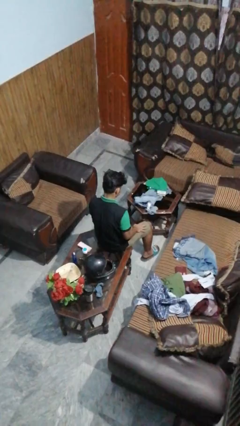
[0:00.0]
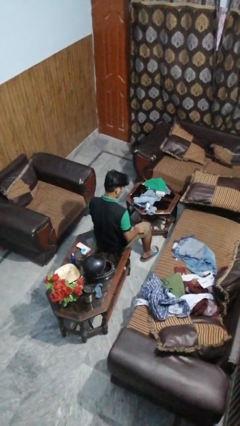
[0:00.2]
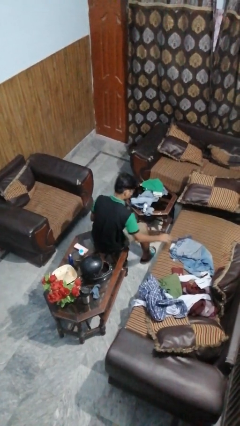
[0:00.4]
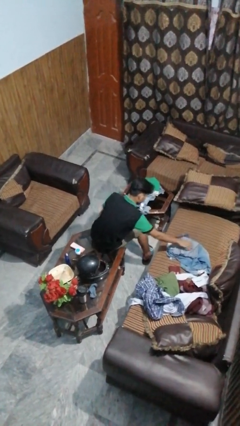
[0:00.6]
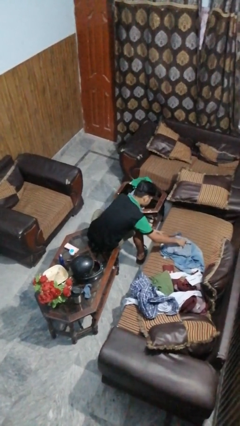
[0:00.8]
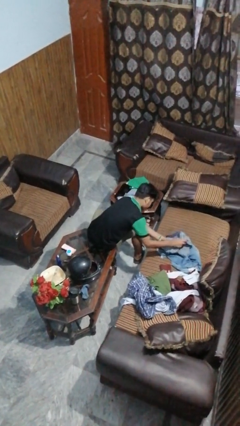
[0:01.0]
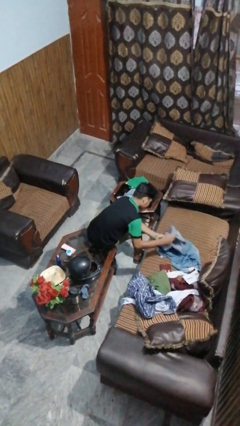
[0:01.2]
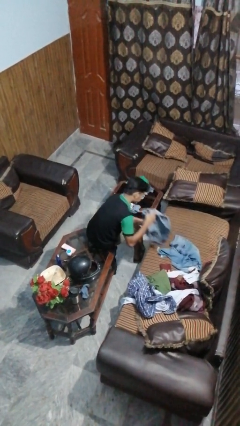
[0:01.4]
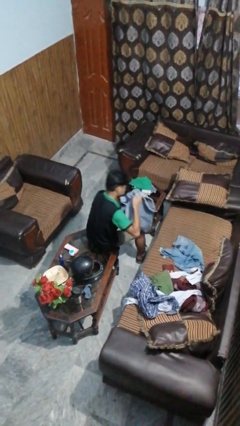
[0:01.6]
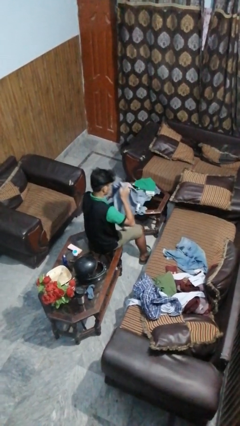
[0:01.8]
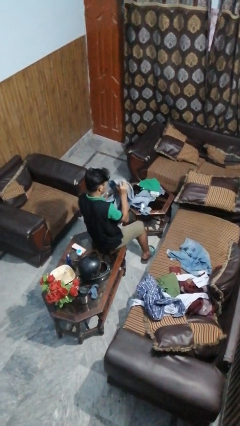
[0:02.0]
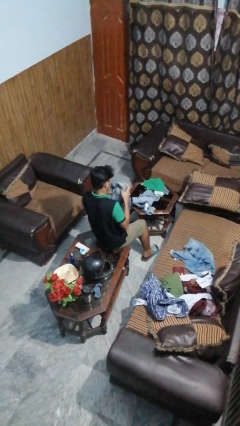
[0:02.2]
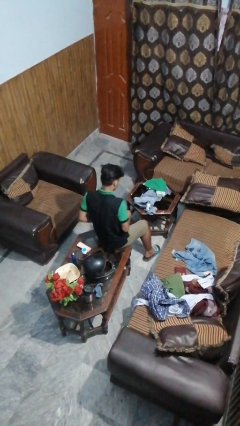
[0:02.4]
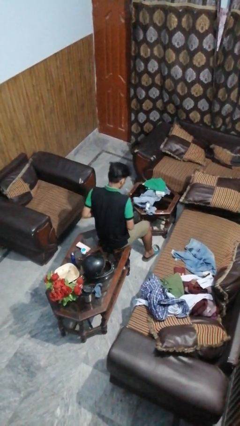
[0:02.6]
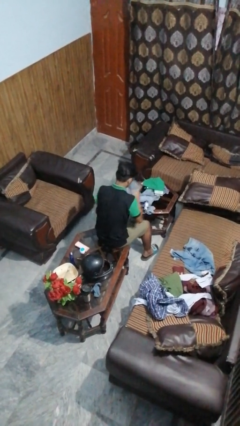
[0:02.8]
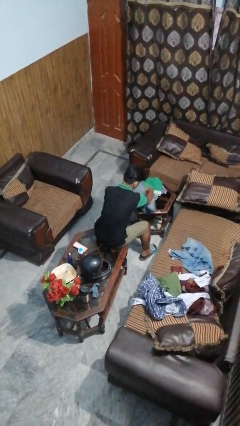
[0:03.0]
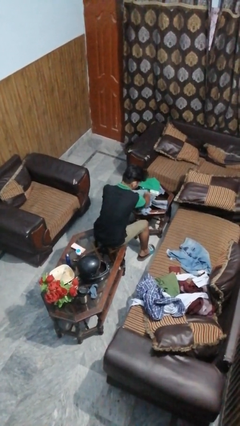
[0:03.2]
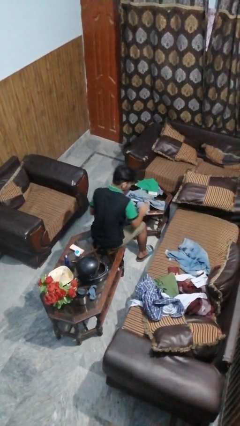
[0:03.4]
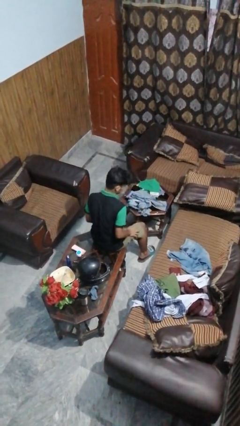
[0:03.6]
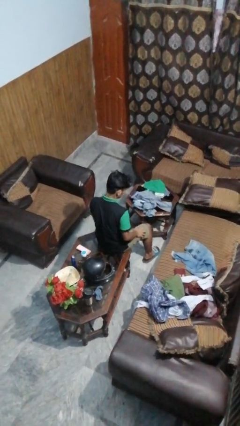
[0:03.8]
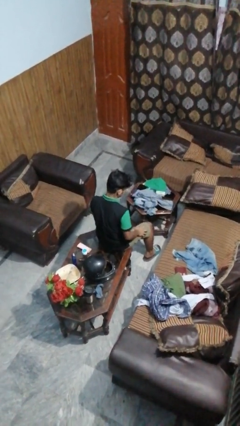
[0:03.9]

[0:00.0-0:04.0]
person folds pants

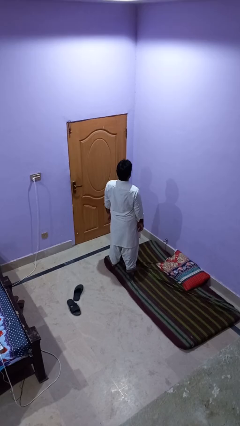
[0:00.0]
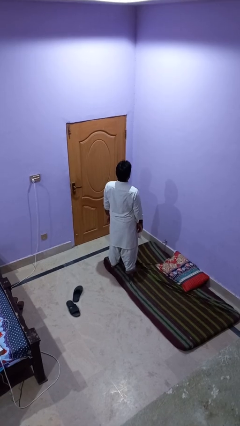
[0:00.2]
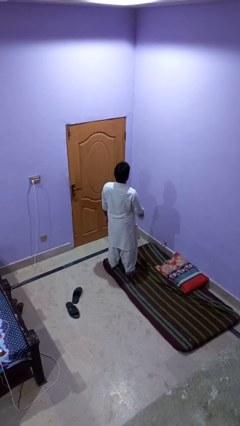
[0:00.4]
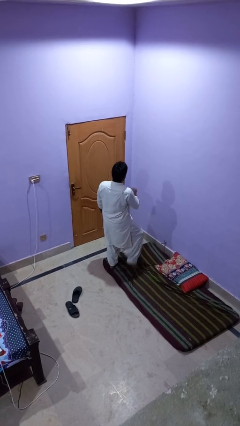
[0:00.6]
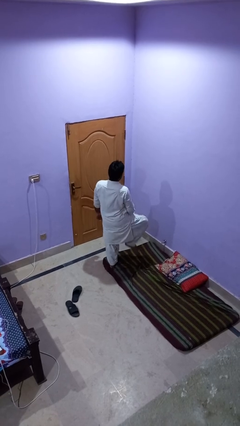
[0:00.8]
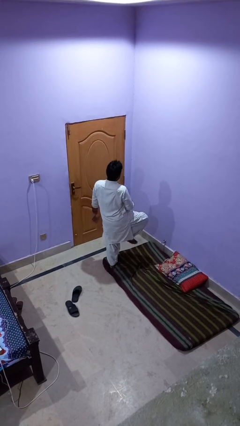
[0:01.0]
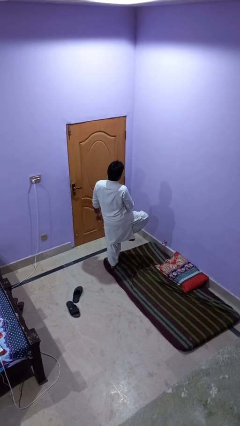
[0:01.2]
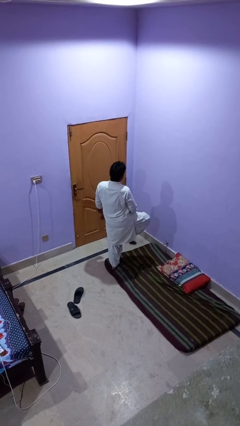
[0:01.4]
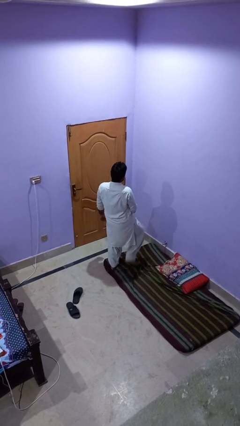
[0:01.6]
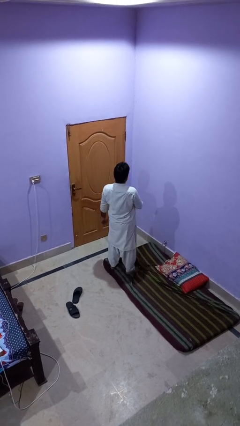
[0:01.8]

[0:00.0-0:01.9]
person slaps hands on thighs

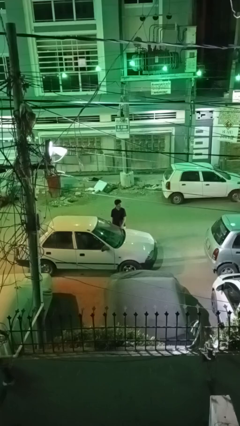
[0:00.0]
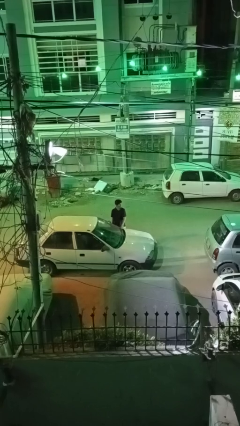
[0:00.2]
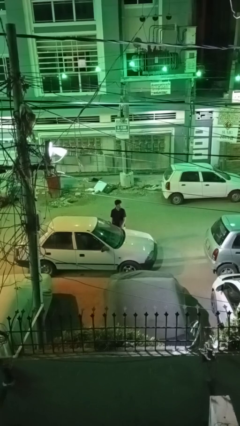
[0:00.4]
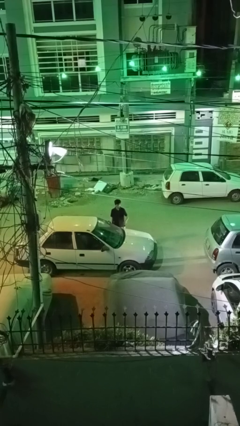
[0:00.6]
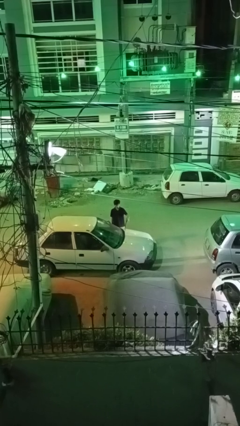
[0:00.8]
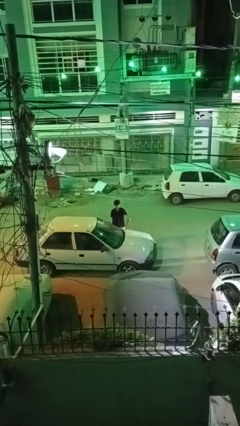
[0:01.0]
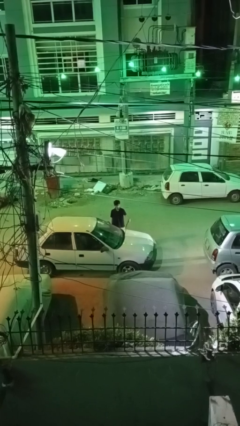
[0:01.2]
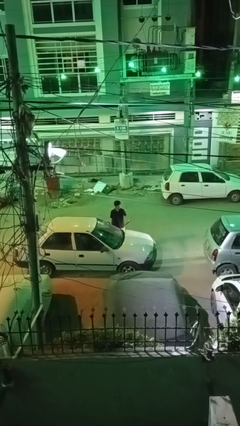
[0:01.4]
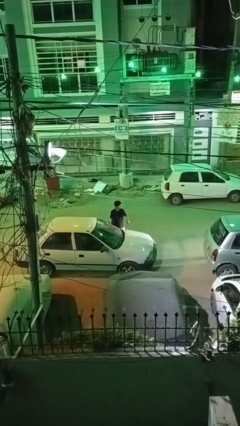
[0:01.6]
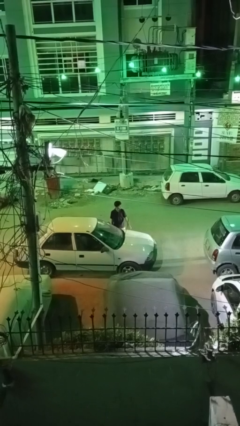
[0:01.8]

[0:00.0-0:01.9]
person flips up car wipers

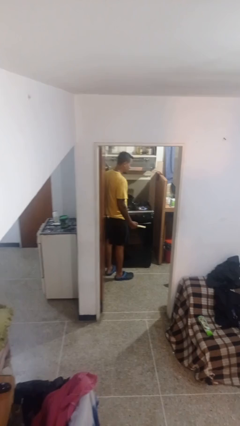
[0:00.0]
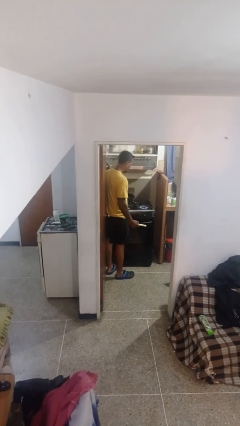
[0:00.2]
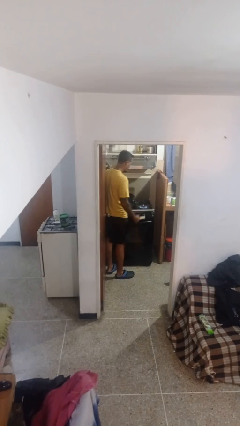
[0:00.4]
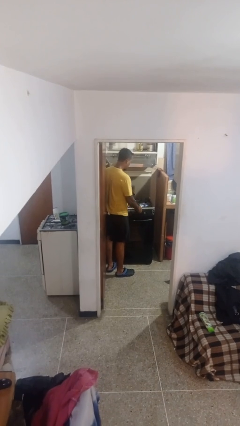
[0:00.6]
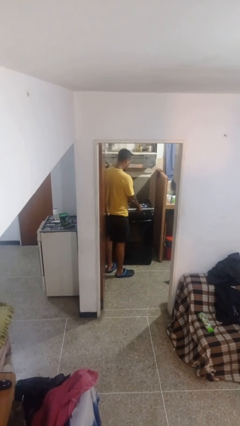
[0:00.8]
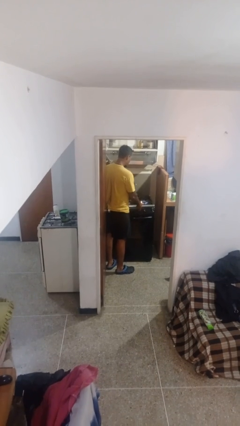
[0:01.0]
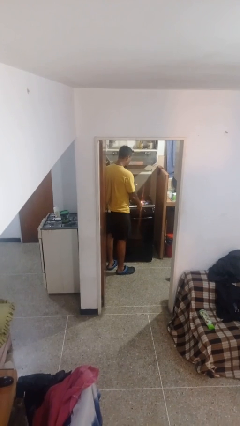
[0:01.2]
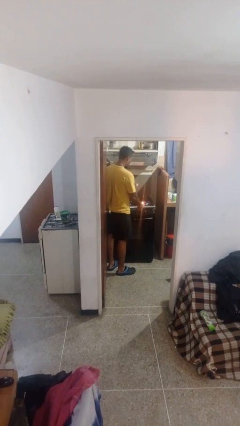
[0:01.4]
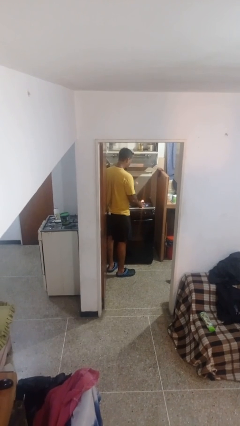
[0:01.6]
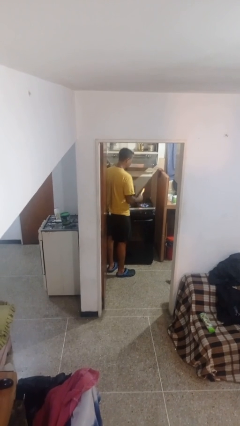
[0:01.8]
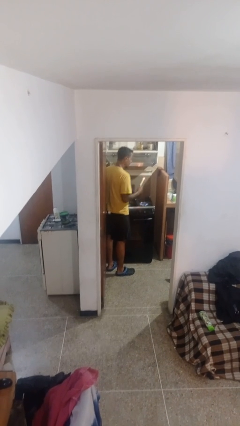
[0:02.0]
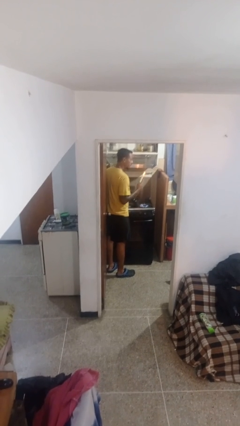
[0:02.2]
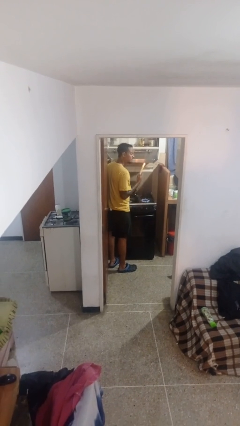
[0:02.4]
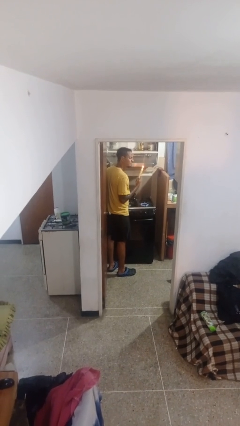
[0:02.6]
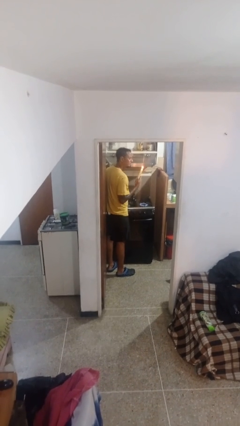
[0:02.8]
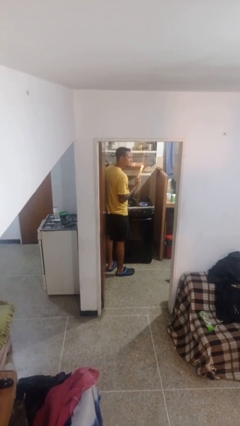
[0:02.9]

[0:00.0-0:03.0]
person lights candle

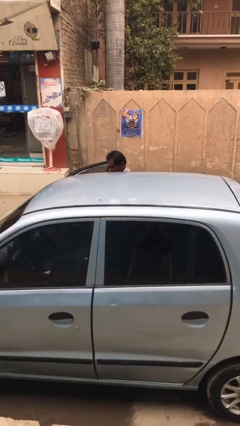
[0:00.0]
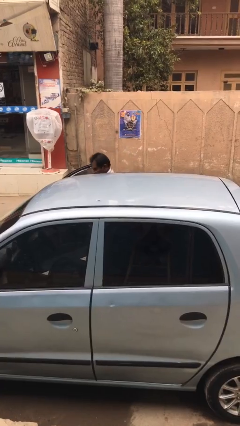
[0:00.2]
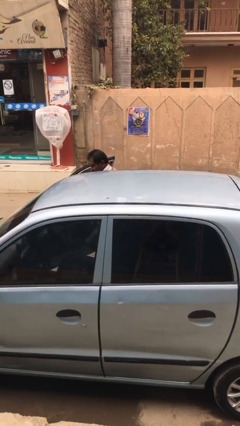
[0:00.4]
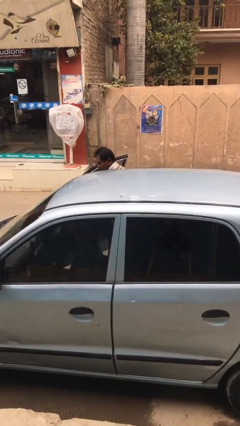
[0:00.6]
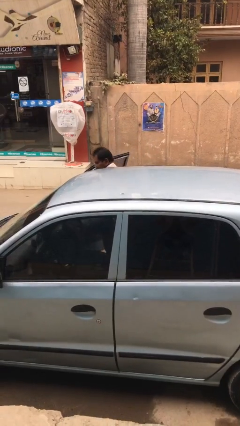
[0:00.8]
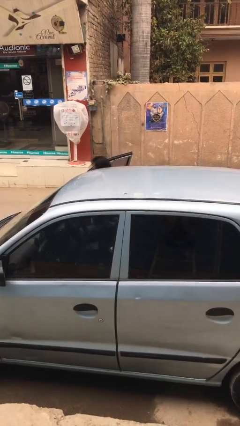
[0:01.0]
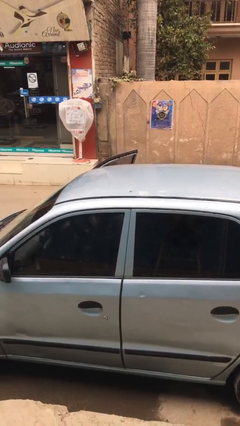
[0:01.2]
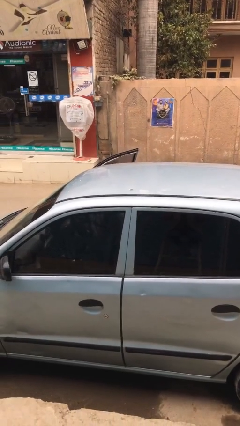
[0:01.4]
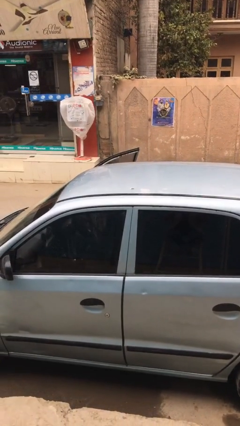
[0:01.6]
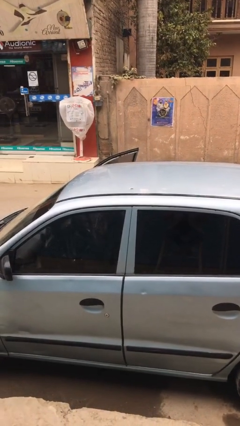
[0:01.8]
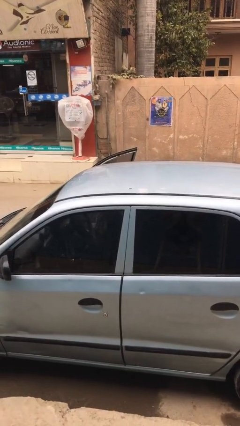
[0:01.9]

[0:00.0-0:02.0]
person enters car

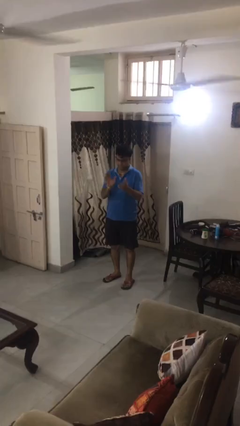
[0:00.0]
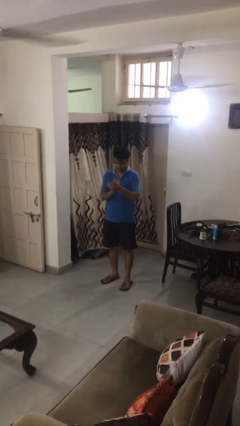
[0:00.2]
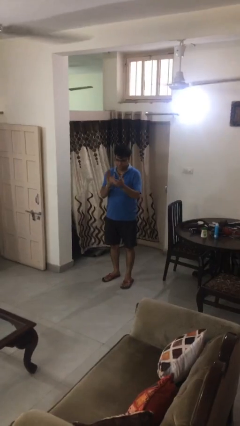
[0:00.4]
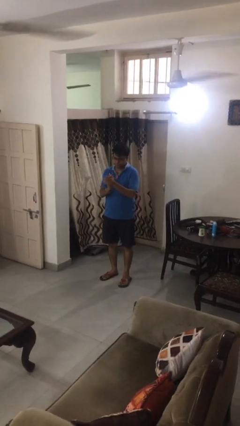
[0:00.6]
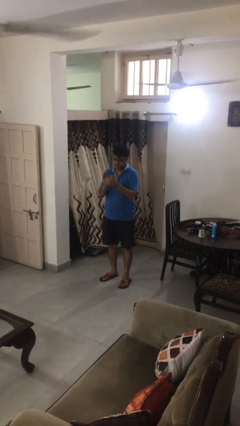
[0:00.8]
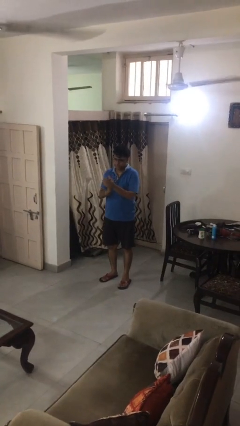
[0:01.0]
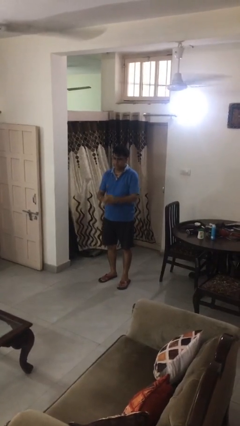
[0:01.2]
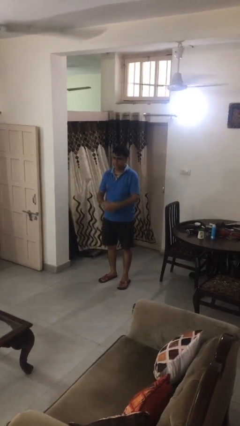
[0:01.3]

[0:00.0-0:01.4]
person claps hands

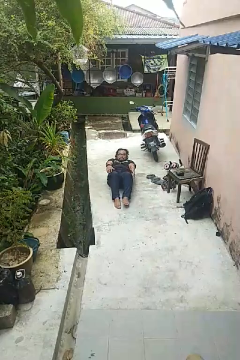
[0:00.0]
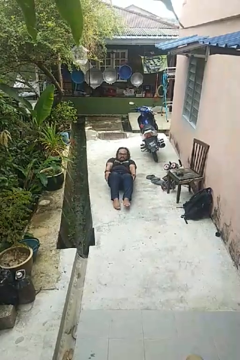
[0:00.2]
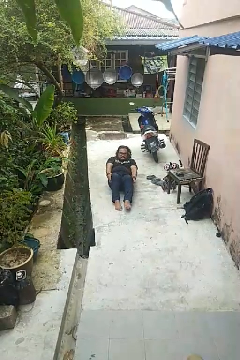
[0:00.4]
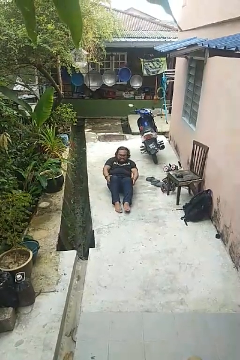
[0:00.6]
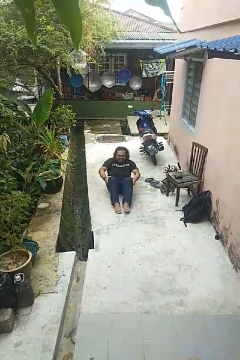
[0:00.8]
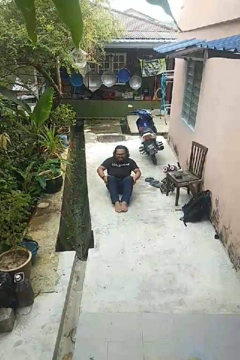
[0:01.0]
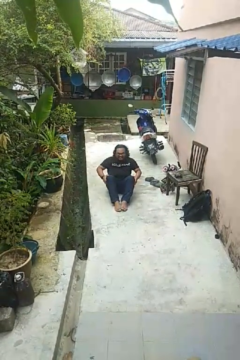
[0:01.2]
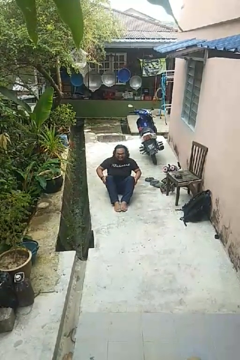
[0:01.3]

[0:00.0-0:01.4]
person exercises with situp

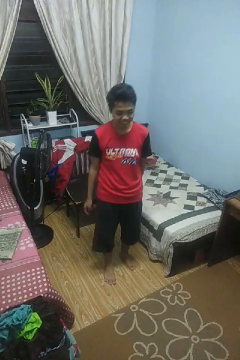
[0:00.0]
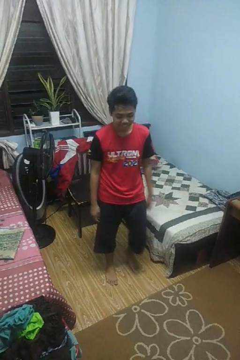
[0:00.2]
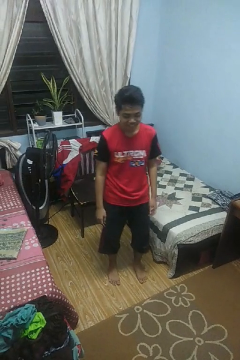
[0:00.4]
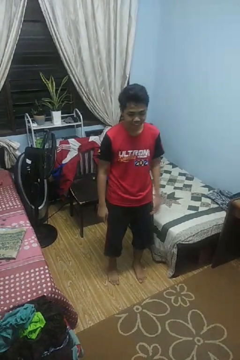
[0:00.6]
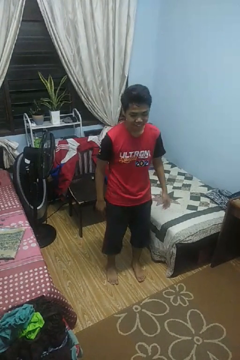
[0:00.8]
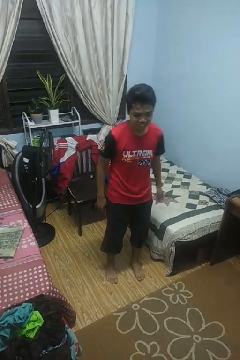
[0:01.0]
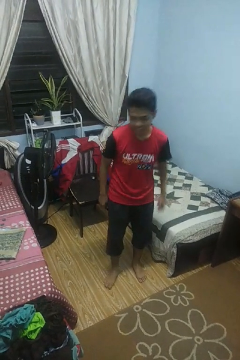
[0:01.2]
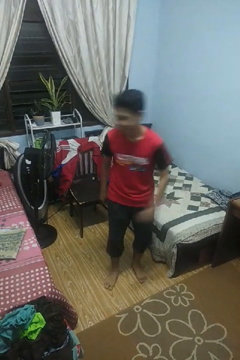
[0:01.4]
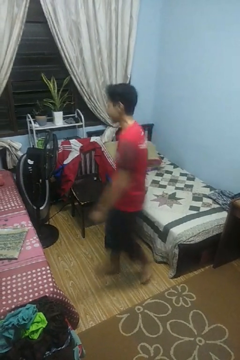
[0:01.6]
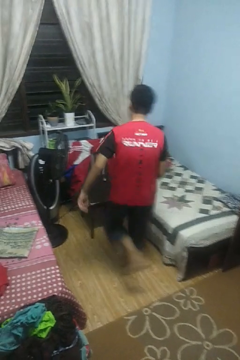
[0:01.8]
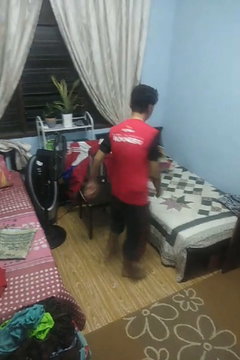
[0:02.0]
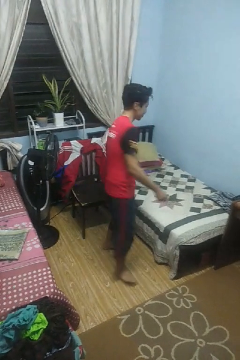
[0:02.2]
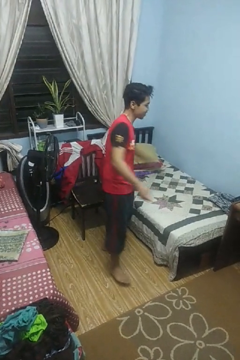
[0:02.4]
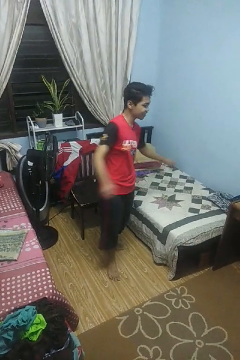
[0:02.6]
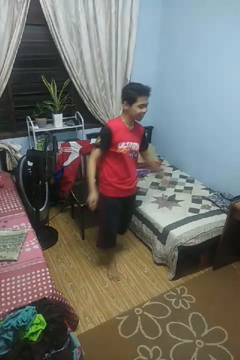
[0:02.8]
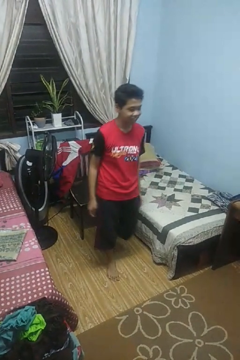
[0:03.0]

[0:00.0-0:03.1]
person twirls
